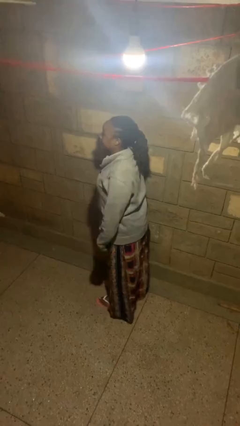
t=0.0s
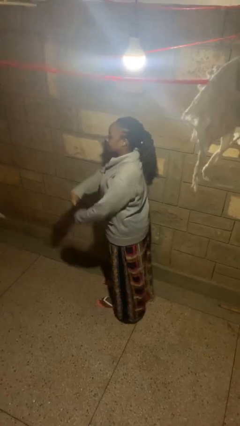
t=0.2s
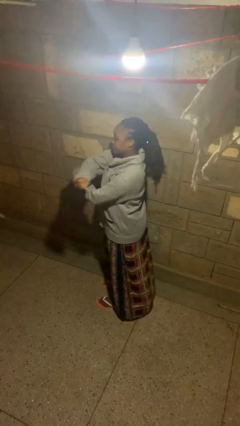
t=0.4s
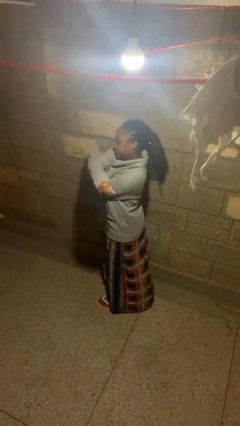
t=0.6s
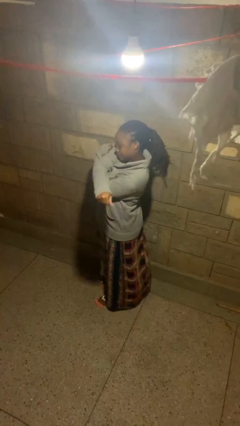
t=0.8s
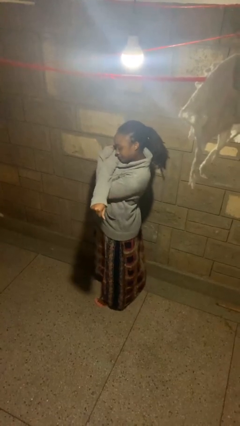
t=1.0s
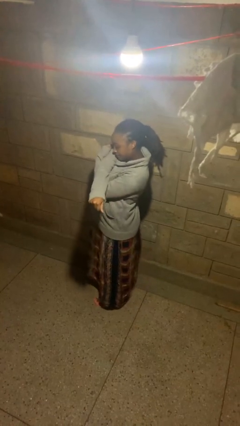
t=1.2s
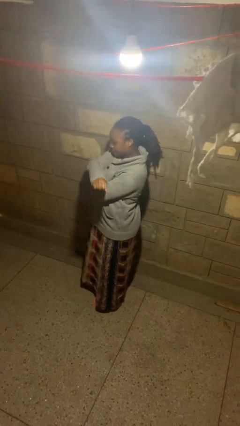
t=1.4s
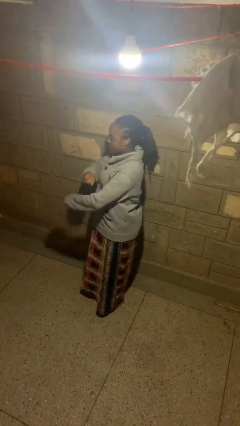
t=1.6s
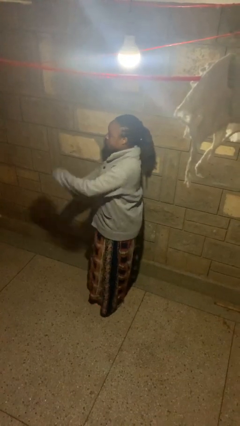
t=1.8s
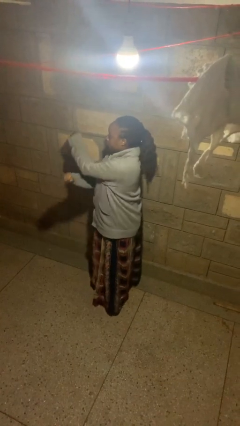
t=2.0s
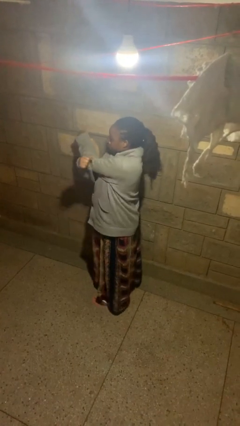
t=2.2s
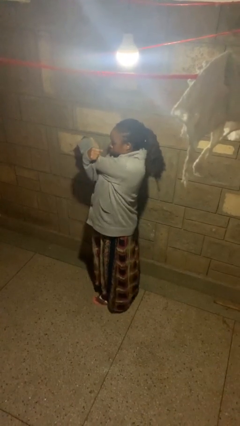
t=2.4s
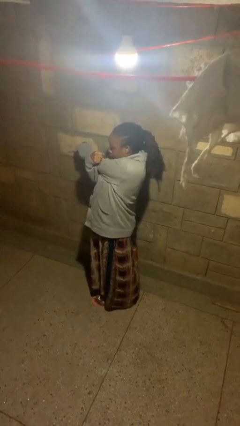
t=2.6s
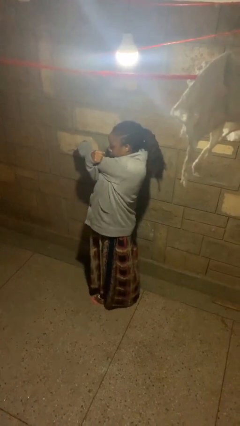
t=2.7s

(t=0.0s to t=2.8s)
person stretches arms to side

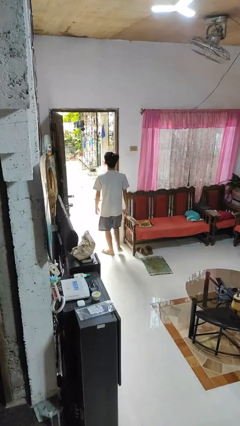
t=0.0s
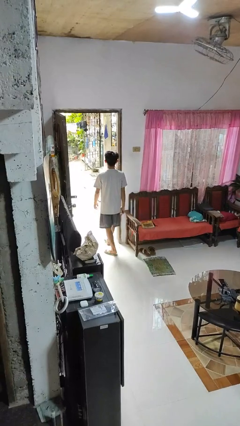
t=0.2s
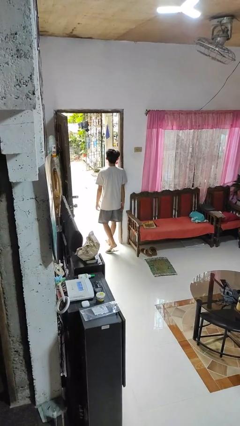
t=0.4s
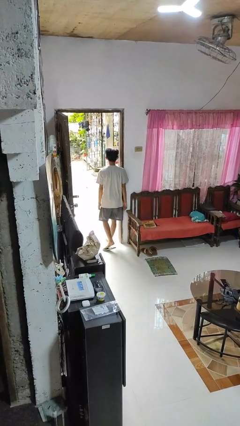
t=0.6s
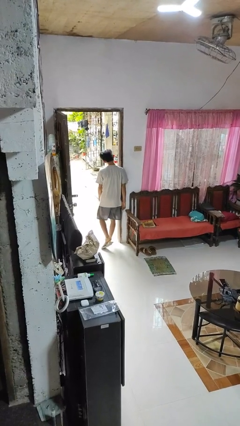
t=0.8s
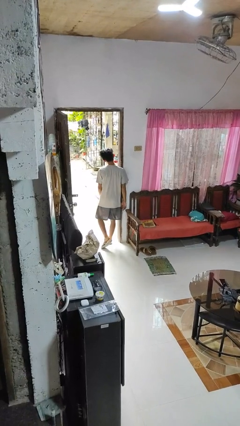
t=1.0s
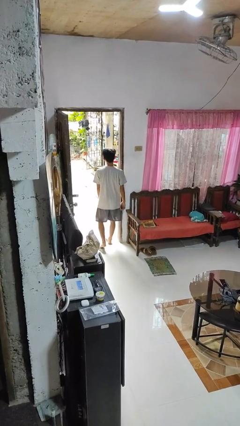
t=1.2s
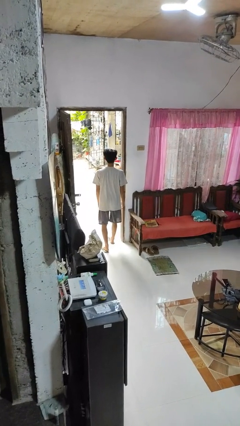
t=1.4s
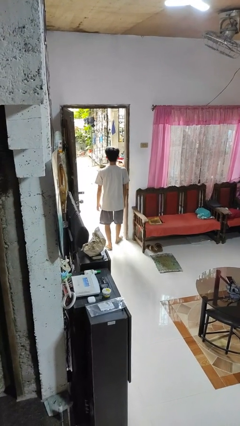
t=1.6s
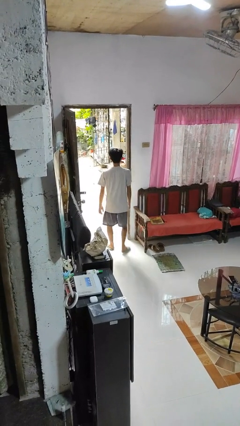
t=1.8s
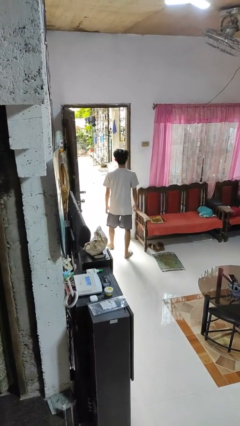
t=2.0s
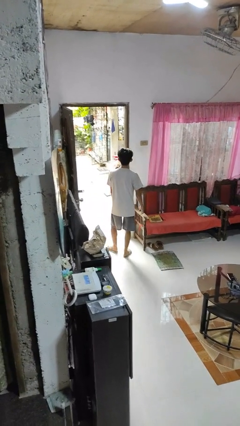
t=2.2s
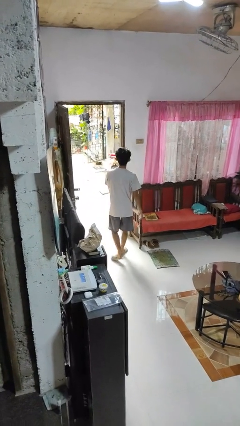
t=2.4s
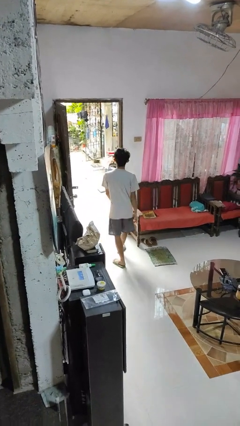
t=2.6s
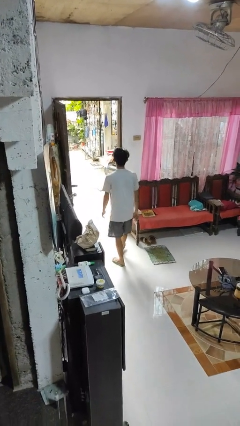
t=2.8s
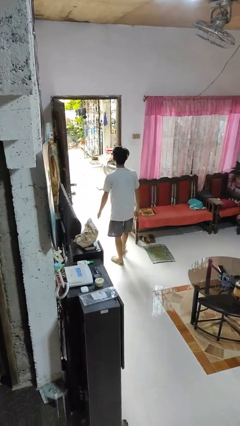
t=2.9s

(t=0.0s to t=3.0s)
person bumps into wall

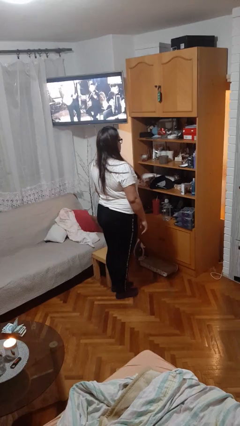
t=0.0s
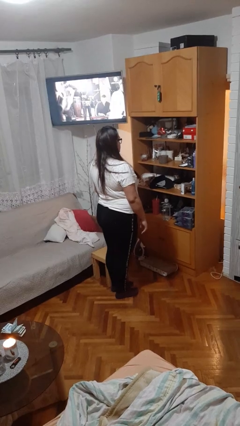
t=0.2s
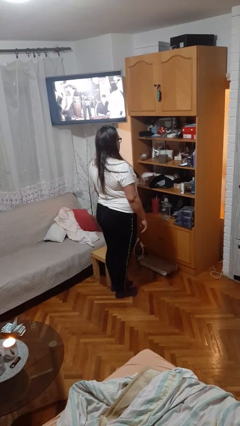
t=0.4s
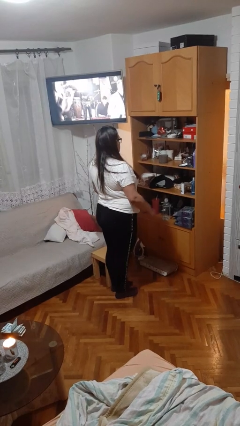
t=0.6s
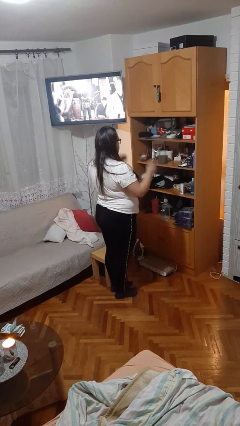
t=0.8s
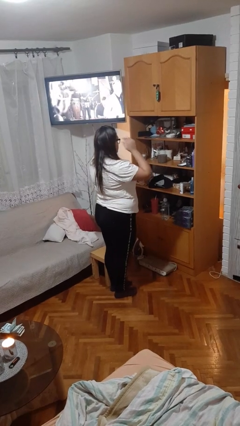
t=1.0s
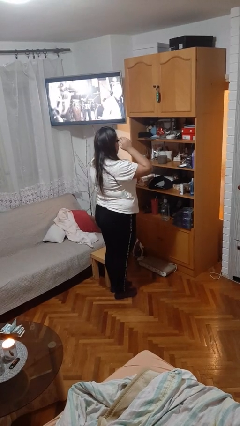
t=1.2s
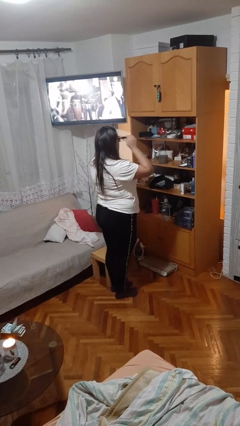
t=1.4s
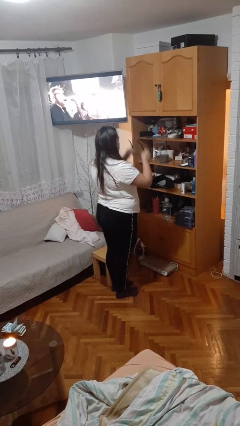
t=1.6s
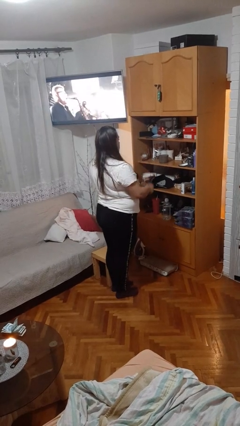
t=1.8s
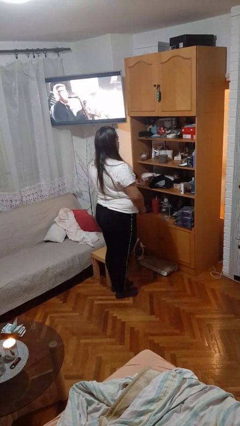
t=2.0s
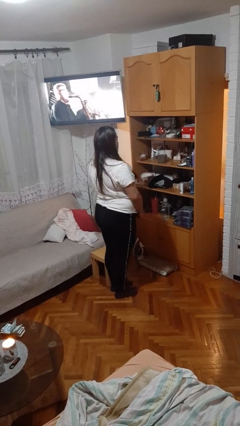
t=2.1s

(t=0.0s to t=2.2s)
person takes off glasses

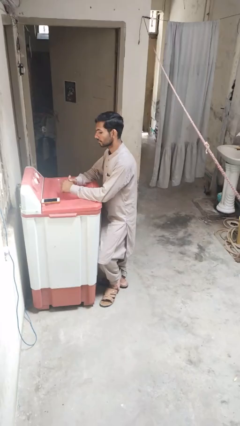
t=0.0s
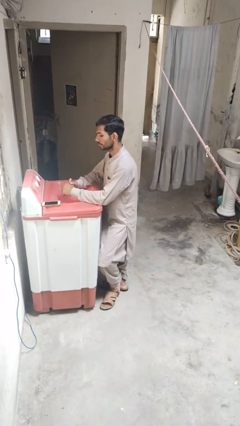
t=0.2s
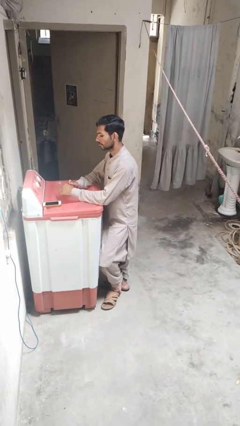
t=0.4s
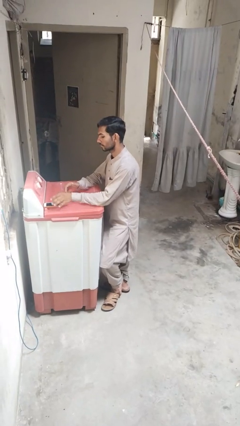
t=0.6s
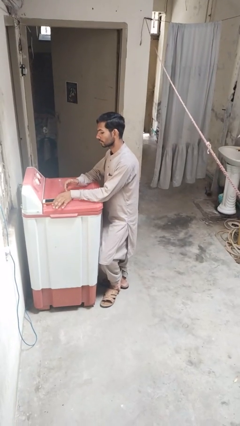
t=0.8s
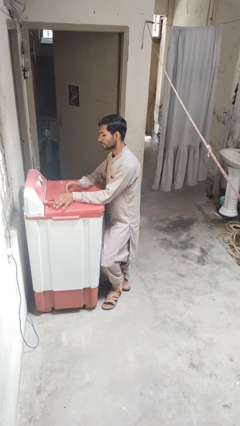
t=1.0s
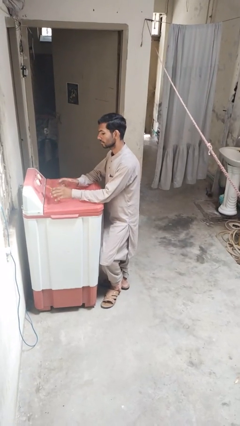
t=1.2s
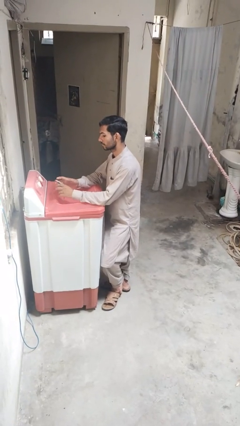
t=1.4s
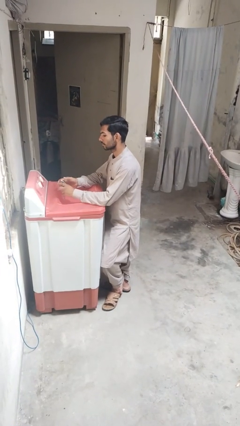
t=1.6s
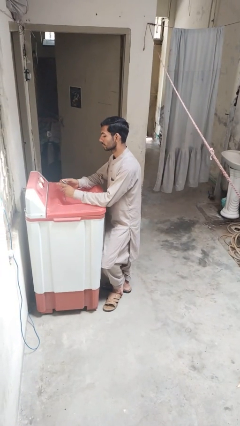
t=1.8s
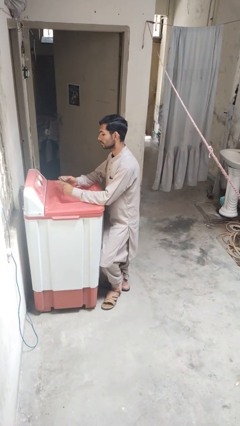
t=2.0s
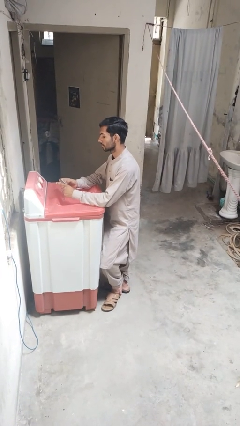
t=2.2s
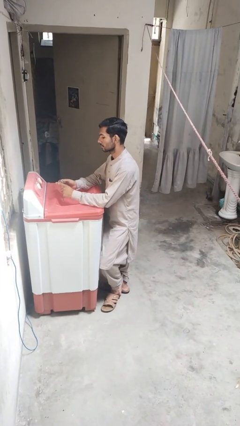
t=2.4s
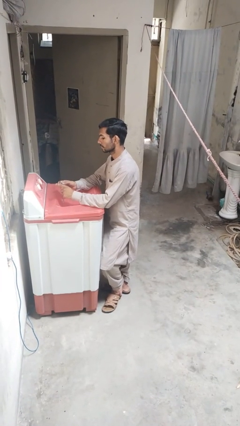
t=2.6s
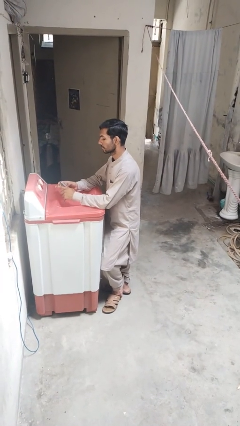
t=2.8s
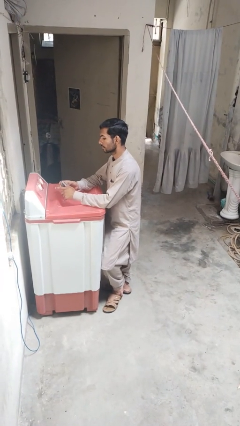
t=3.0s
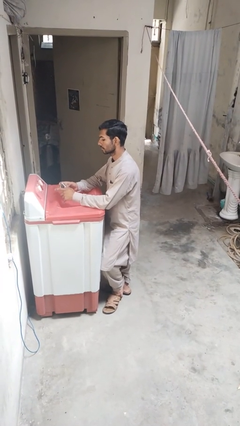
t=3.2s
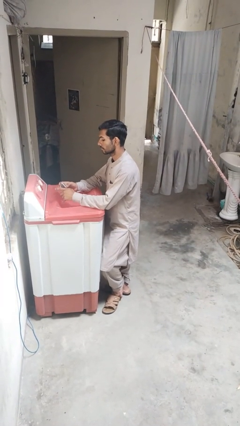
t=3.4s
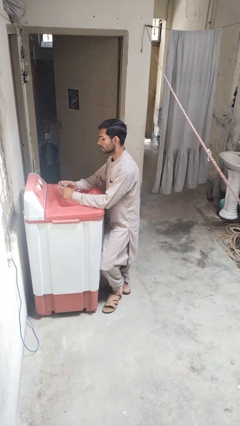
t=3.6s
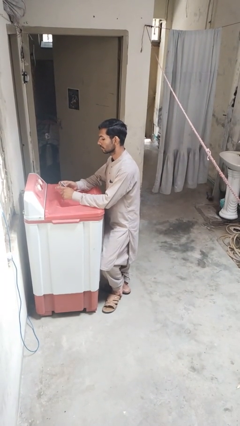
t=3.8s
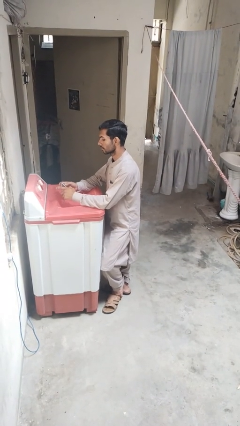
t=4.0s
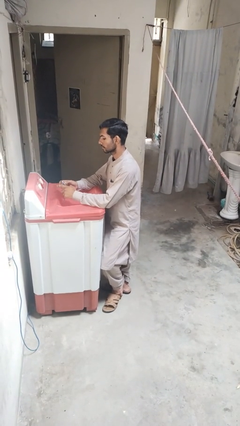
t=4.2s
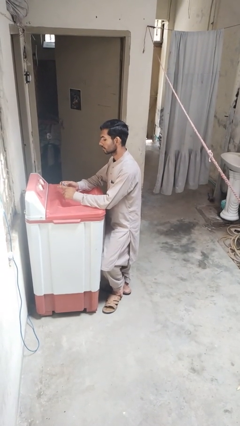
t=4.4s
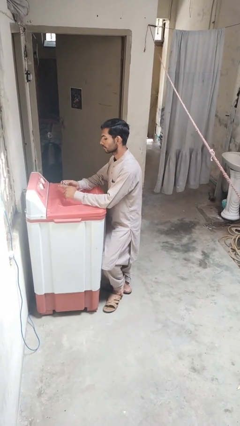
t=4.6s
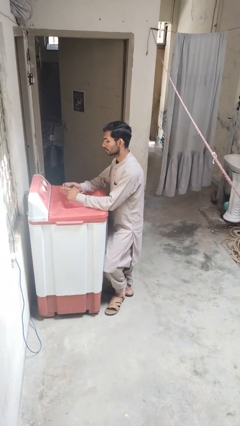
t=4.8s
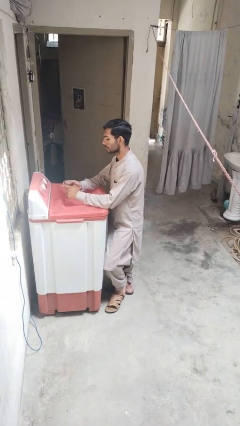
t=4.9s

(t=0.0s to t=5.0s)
person interacts with tablet

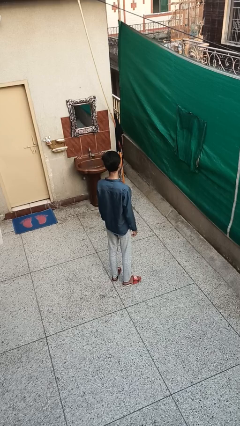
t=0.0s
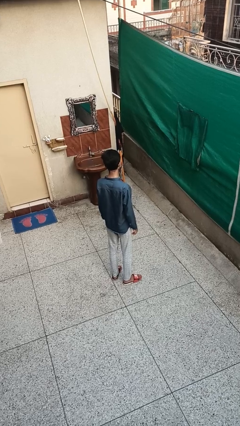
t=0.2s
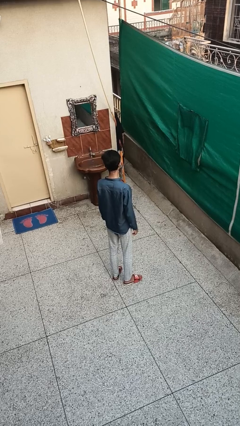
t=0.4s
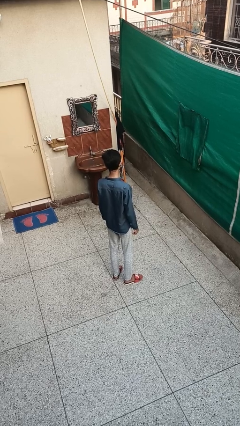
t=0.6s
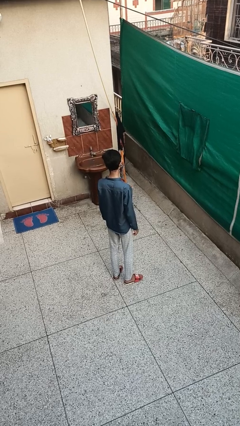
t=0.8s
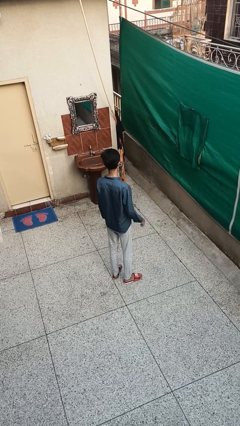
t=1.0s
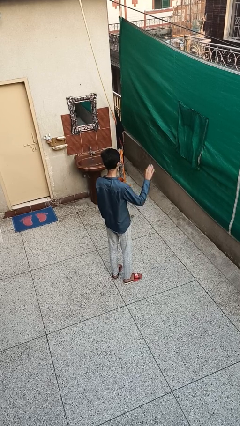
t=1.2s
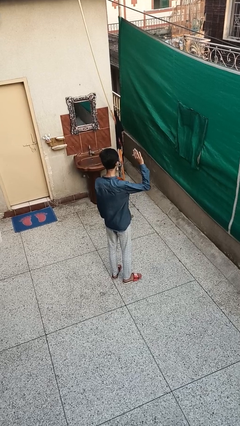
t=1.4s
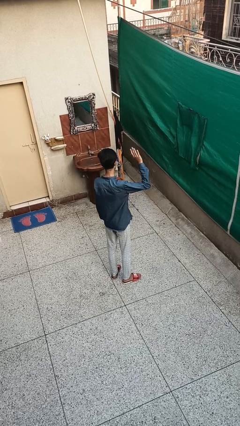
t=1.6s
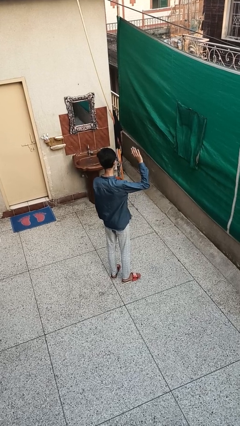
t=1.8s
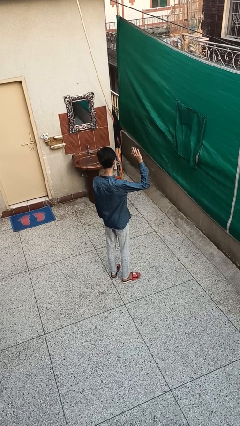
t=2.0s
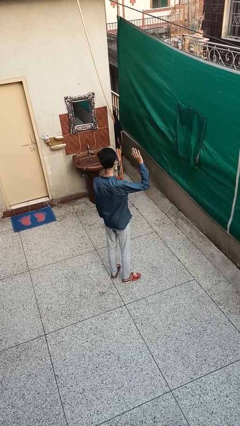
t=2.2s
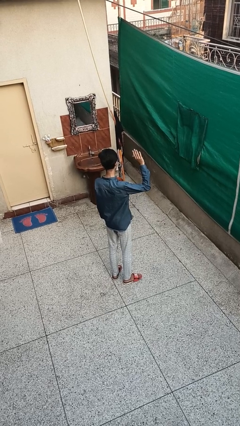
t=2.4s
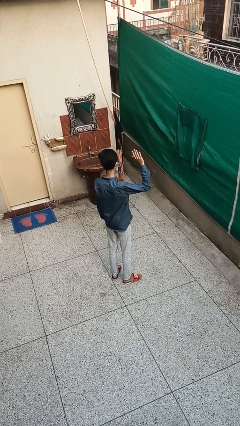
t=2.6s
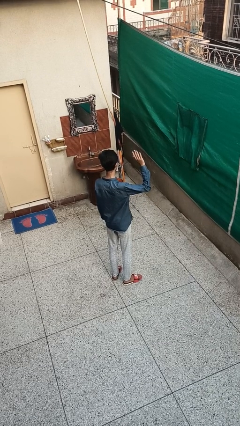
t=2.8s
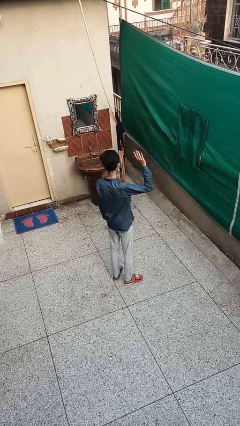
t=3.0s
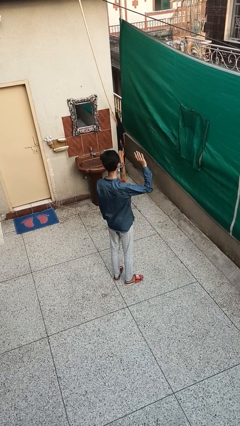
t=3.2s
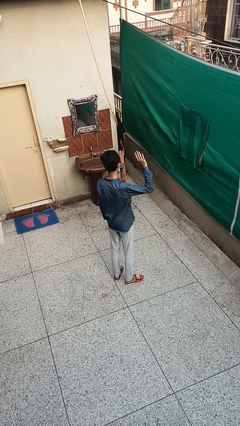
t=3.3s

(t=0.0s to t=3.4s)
person gestures raise hand

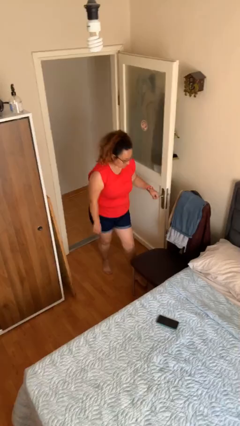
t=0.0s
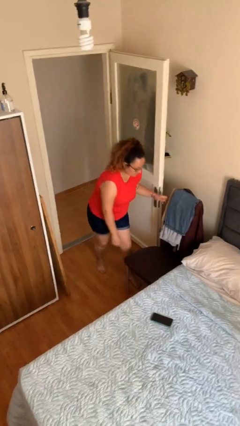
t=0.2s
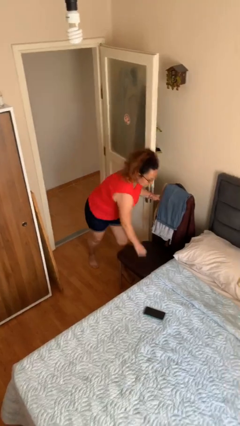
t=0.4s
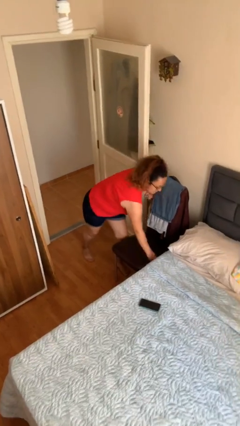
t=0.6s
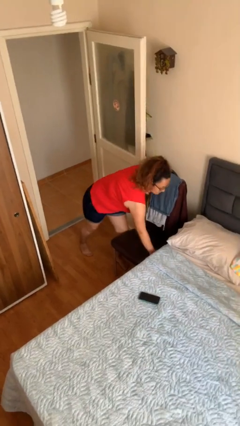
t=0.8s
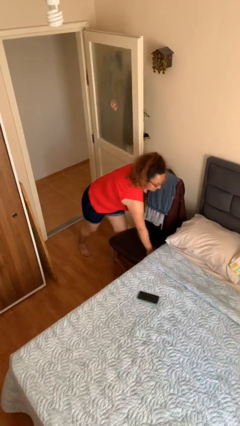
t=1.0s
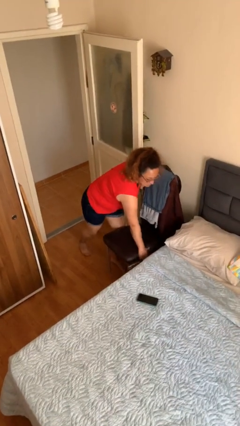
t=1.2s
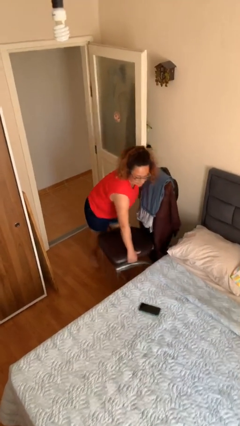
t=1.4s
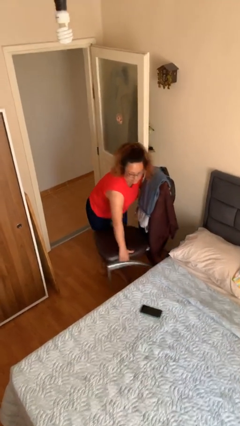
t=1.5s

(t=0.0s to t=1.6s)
person picks up object from floor
